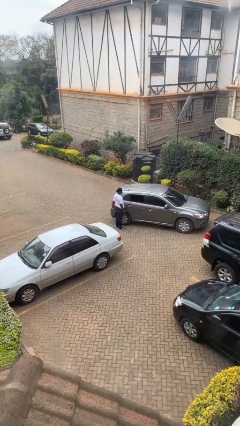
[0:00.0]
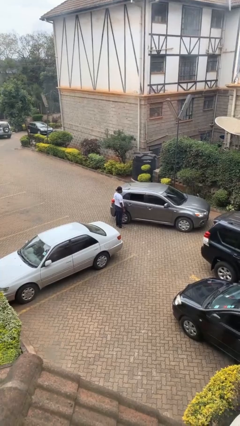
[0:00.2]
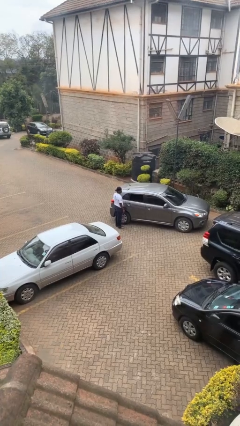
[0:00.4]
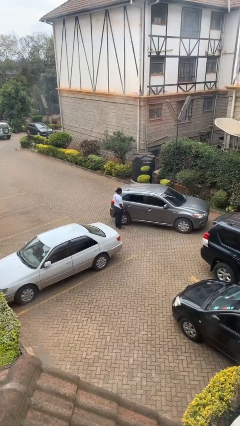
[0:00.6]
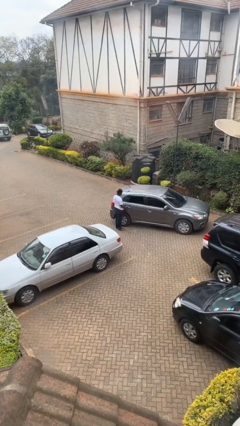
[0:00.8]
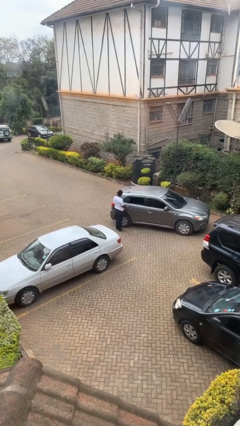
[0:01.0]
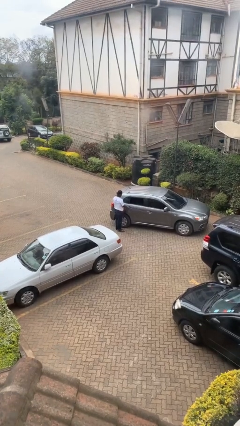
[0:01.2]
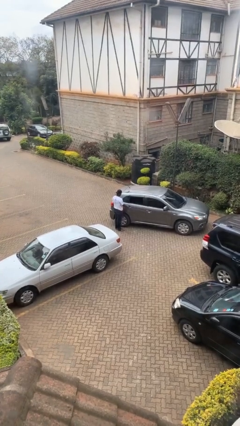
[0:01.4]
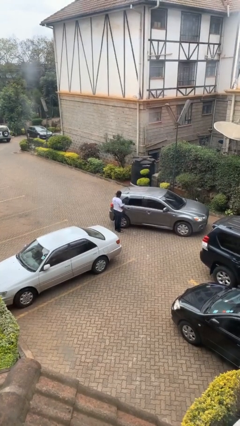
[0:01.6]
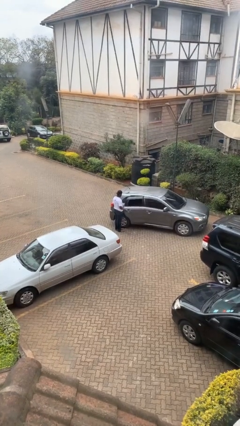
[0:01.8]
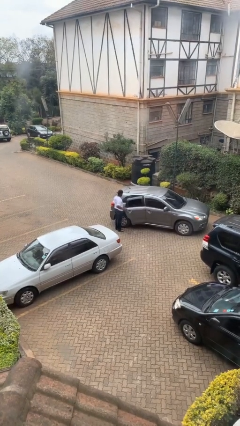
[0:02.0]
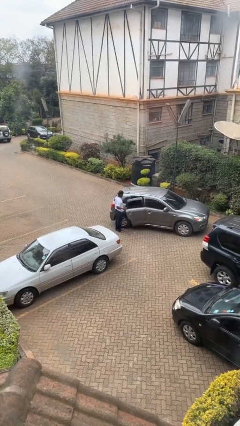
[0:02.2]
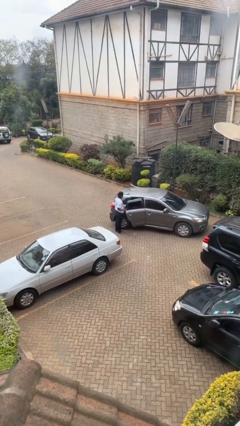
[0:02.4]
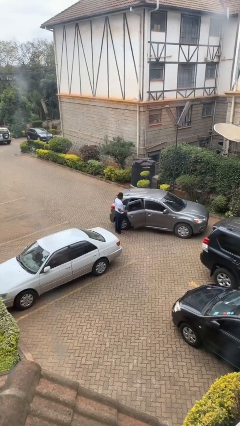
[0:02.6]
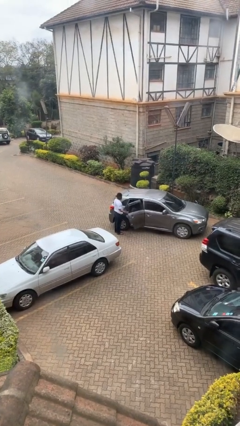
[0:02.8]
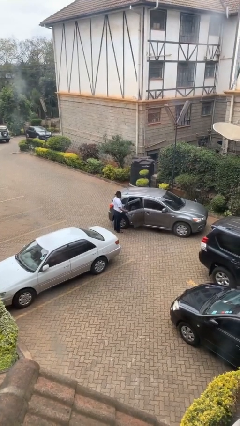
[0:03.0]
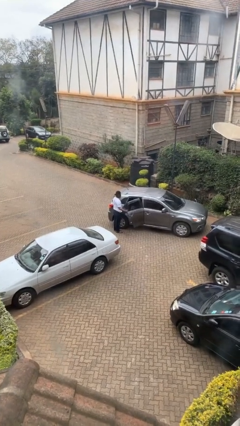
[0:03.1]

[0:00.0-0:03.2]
person opens car door

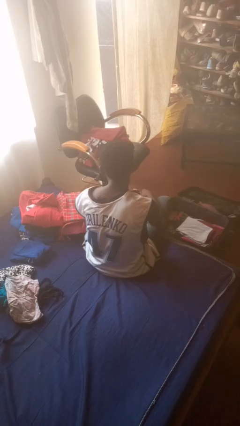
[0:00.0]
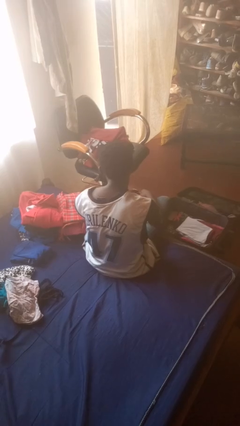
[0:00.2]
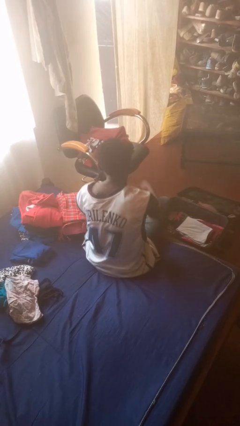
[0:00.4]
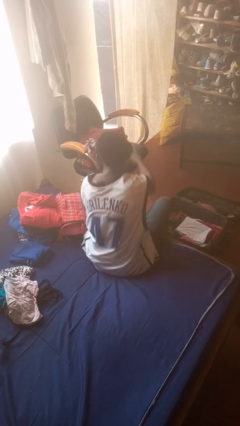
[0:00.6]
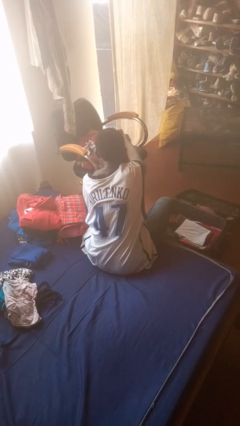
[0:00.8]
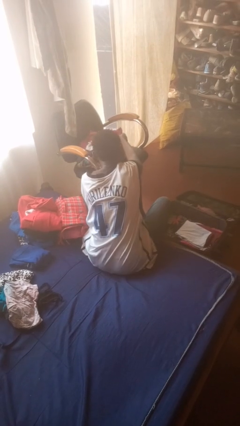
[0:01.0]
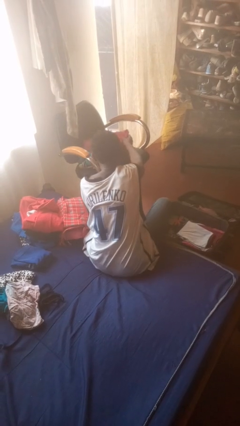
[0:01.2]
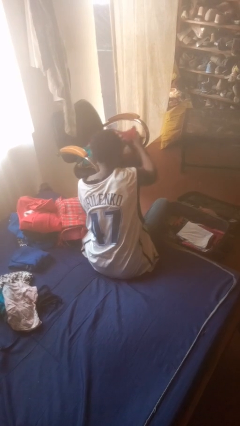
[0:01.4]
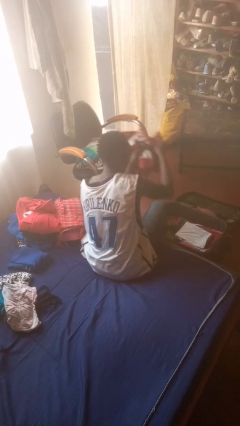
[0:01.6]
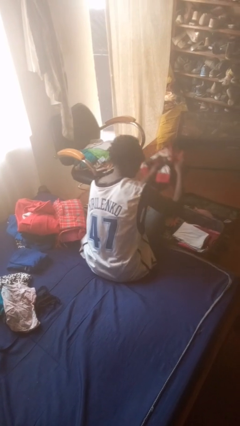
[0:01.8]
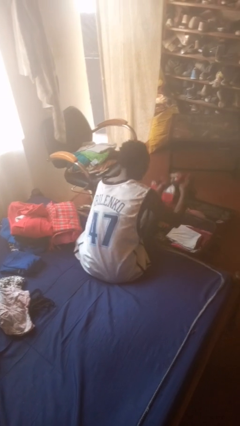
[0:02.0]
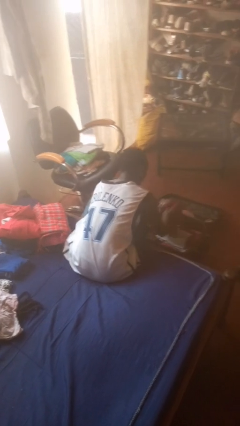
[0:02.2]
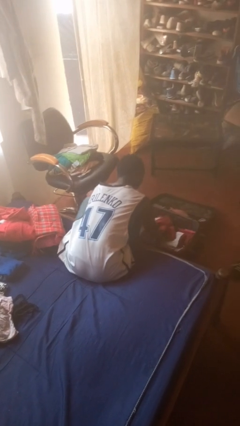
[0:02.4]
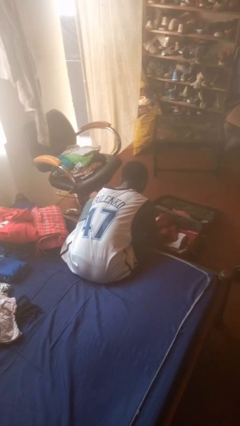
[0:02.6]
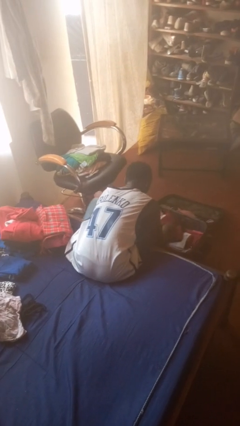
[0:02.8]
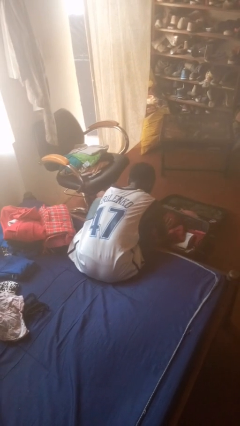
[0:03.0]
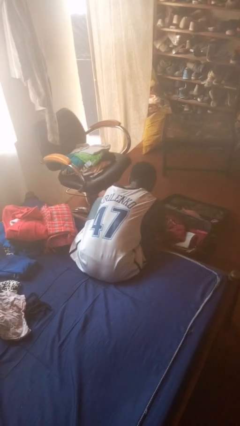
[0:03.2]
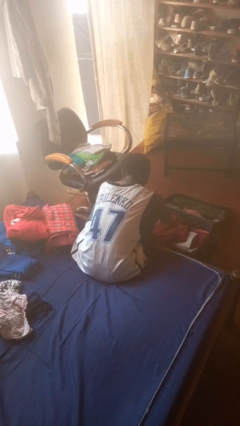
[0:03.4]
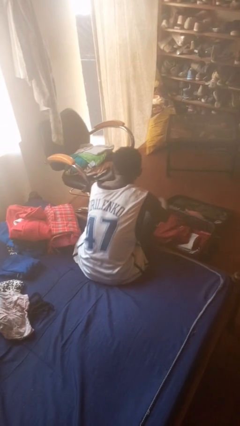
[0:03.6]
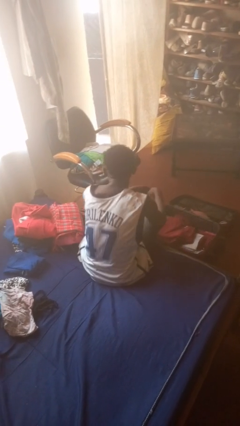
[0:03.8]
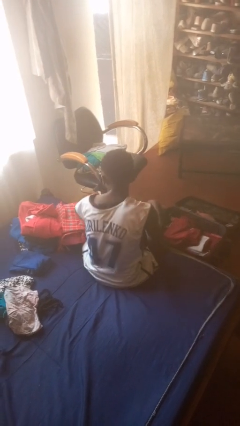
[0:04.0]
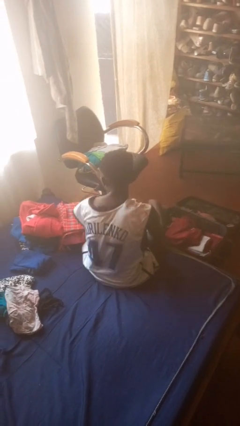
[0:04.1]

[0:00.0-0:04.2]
person loads clothes into suitcase

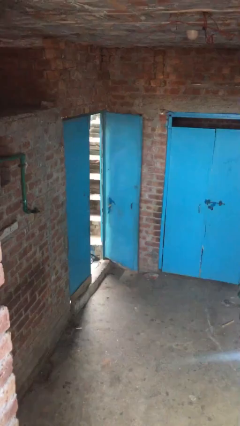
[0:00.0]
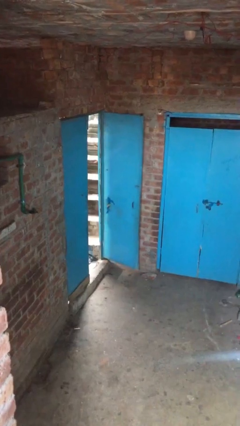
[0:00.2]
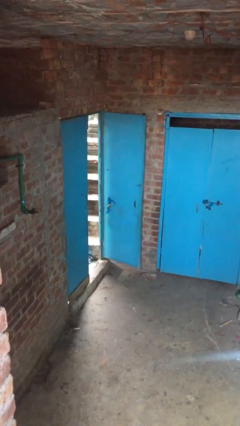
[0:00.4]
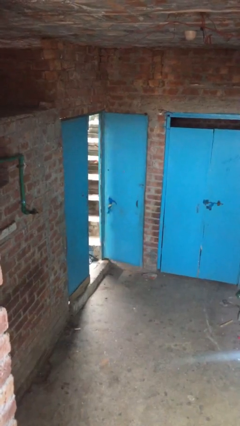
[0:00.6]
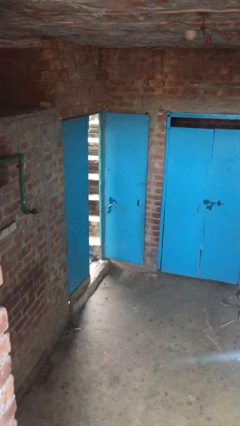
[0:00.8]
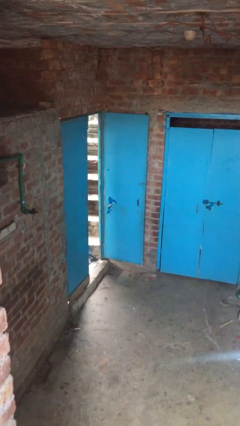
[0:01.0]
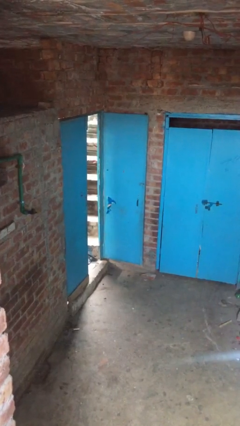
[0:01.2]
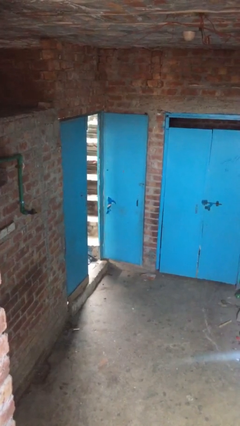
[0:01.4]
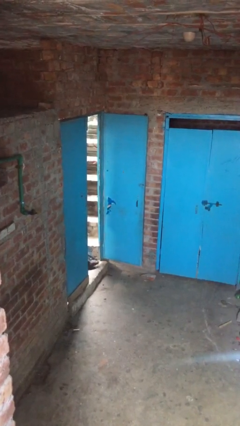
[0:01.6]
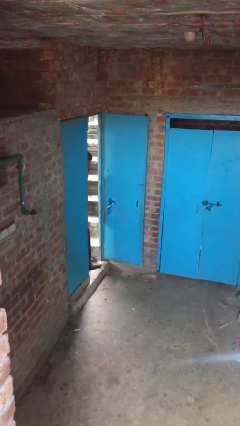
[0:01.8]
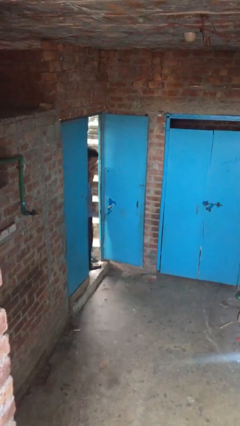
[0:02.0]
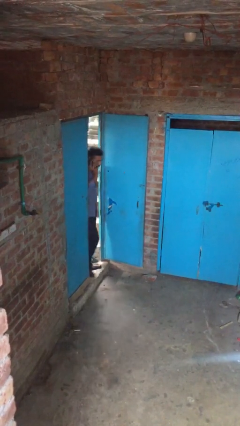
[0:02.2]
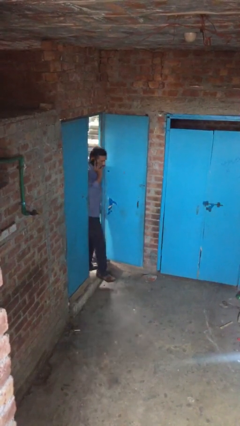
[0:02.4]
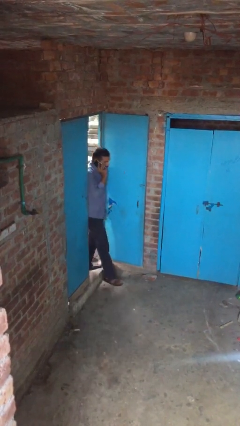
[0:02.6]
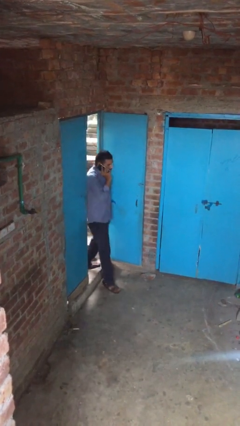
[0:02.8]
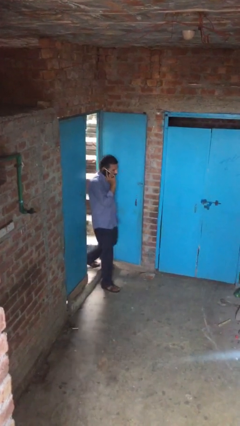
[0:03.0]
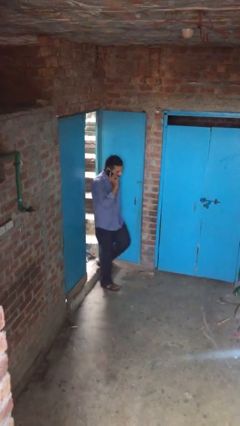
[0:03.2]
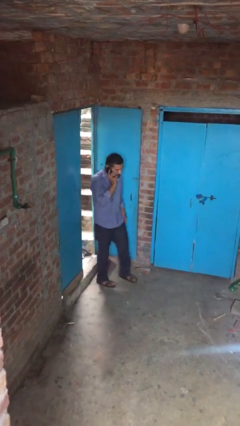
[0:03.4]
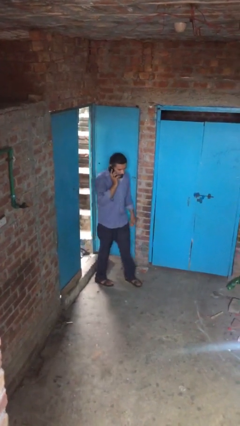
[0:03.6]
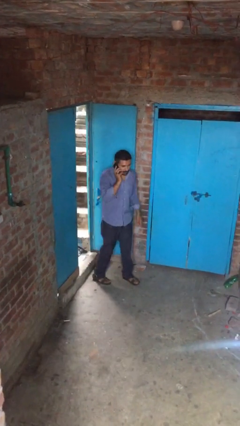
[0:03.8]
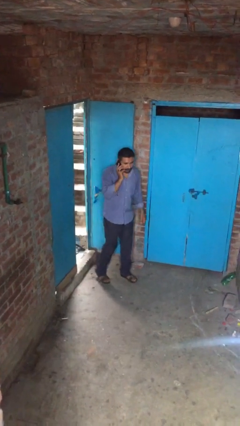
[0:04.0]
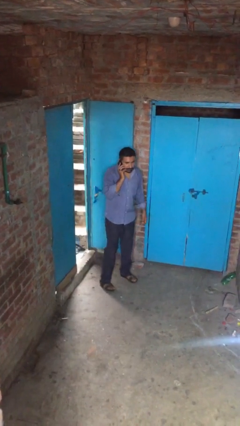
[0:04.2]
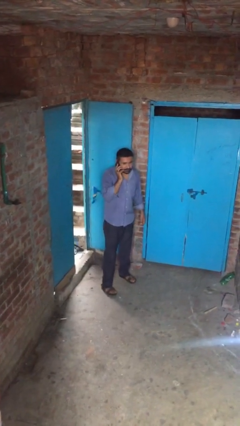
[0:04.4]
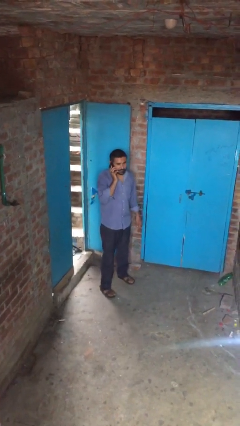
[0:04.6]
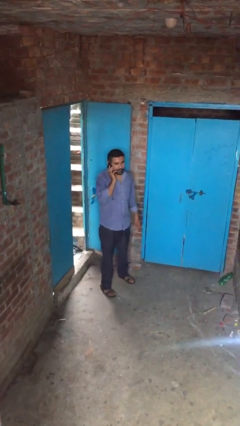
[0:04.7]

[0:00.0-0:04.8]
person enters scene through structure

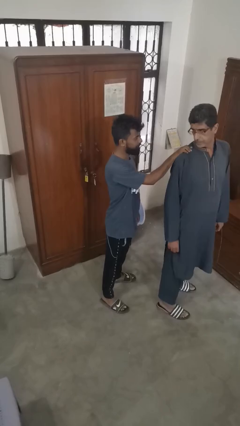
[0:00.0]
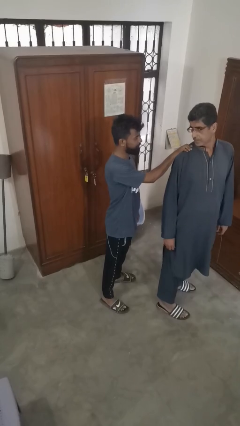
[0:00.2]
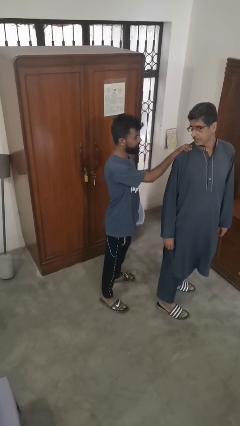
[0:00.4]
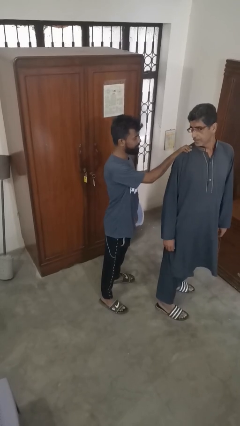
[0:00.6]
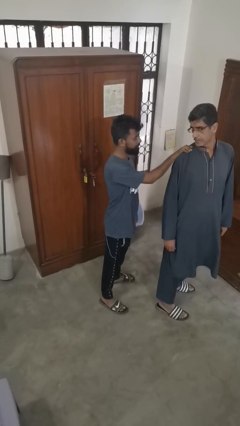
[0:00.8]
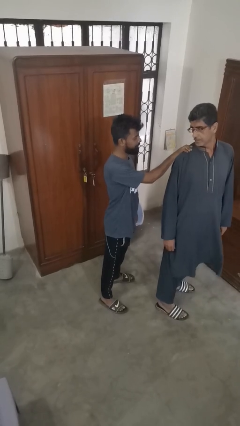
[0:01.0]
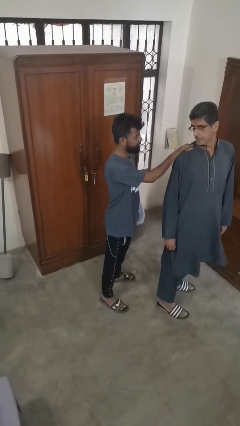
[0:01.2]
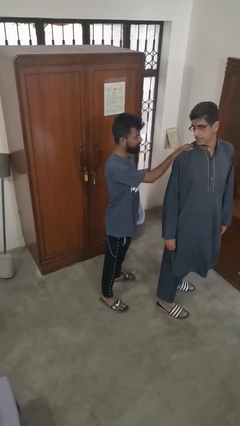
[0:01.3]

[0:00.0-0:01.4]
person spins person around

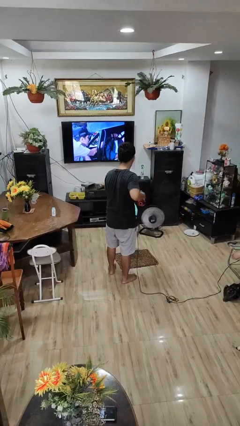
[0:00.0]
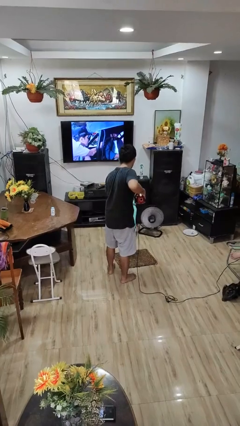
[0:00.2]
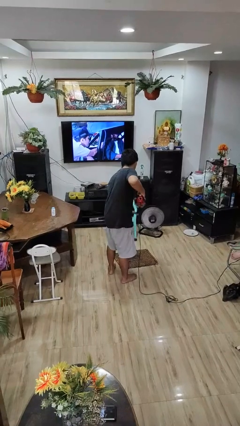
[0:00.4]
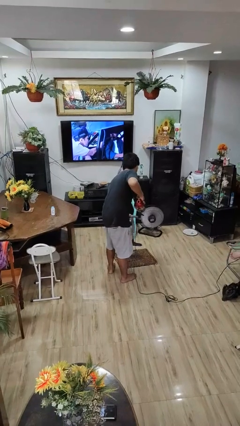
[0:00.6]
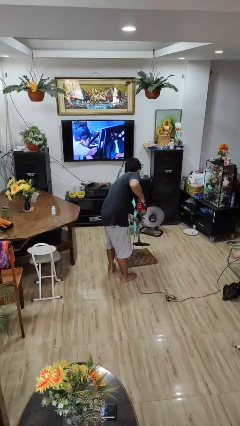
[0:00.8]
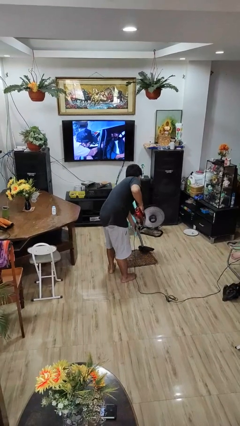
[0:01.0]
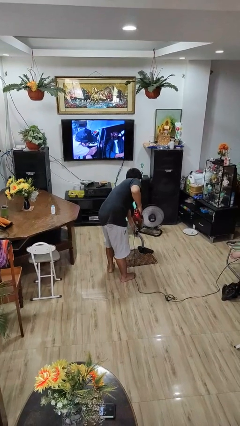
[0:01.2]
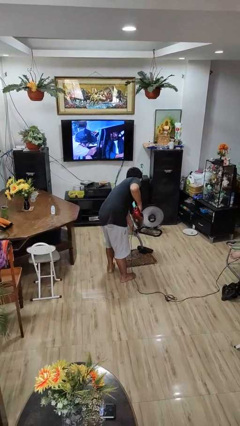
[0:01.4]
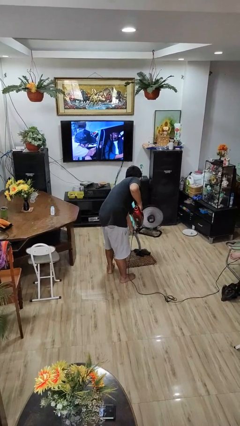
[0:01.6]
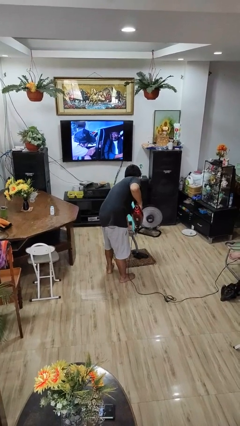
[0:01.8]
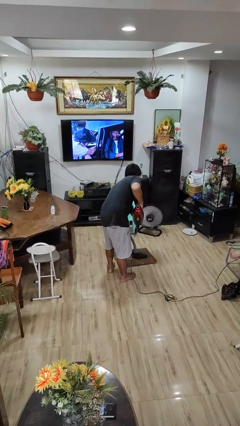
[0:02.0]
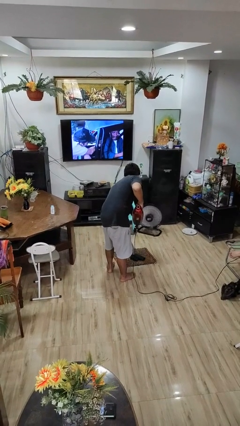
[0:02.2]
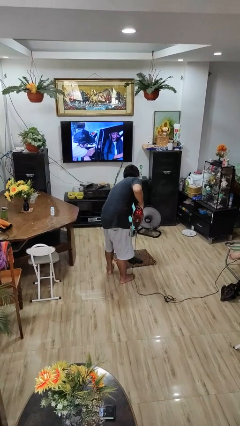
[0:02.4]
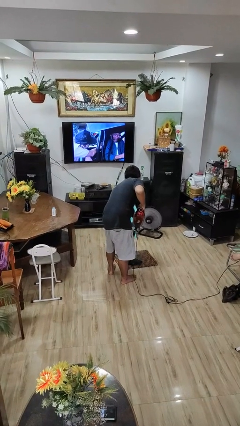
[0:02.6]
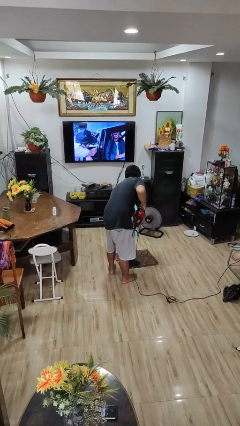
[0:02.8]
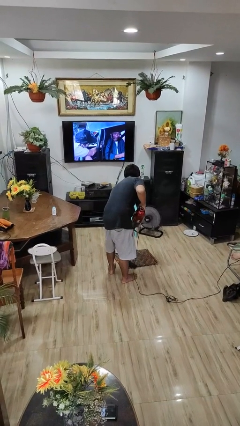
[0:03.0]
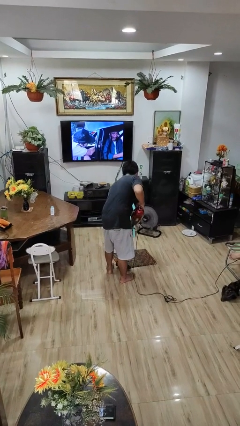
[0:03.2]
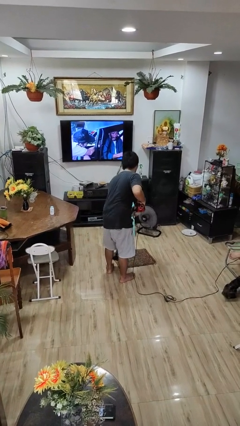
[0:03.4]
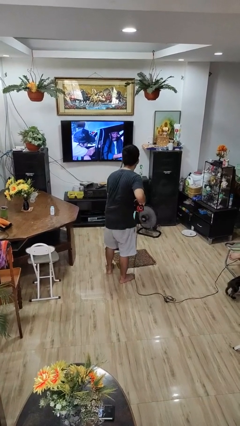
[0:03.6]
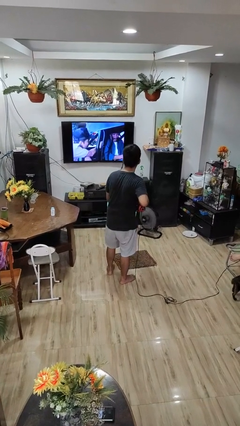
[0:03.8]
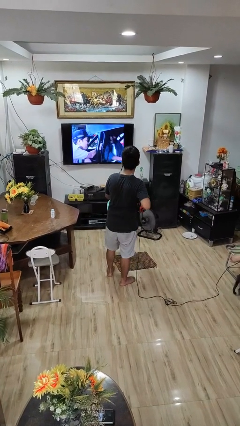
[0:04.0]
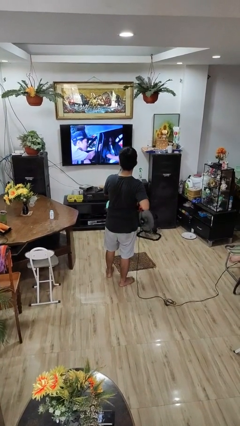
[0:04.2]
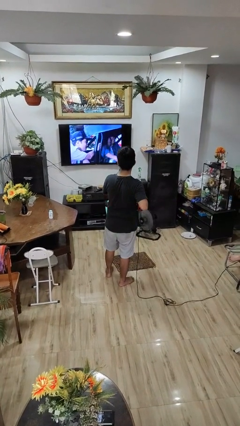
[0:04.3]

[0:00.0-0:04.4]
person vacuums carpet
